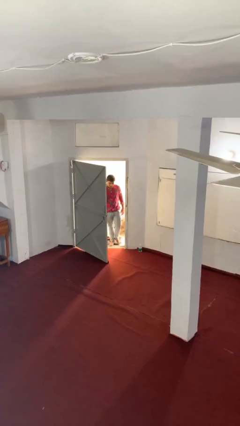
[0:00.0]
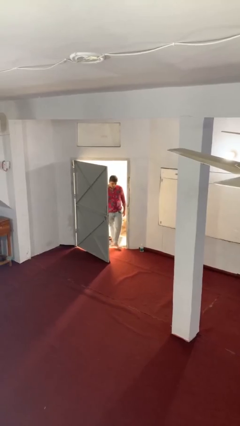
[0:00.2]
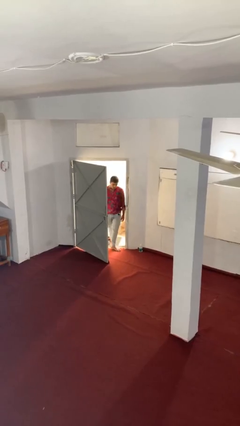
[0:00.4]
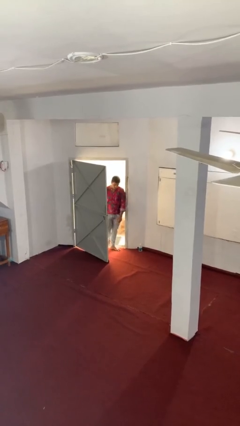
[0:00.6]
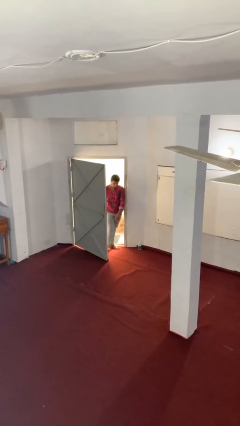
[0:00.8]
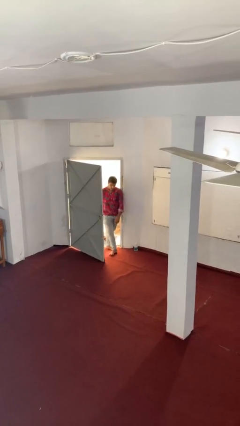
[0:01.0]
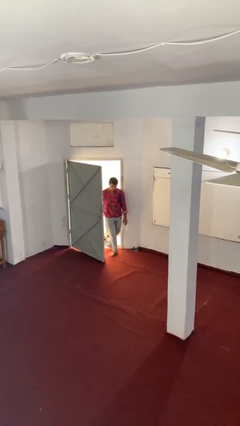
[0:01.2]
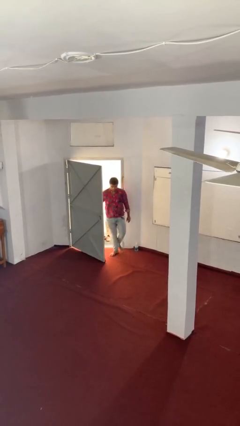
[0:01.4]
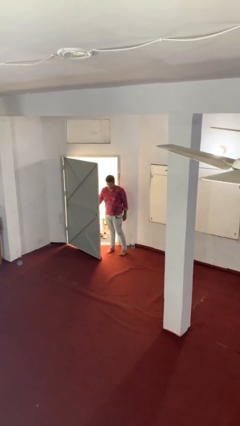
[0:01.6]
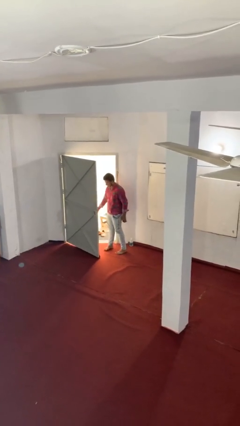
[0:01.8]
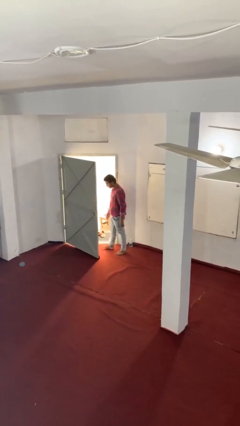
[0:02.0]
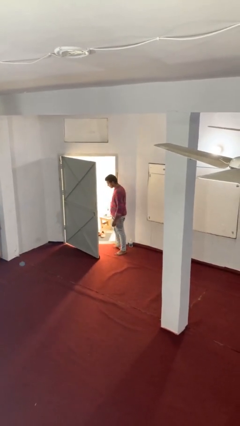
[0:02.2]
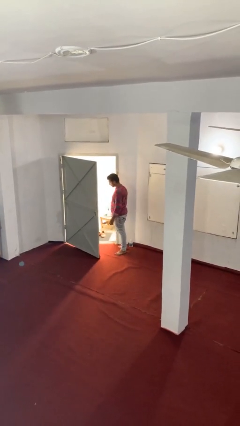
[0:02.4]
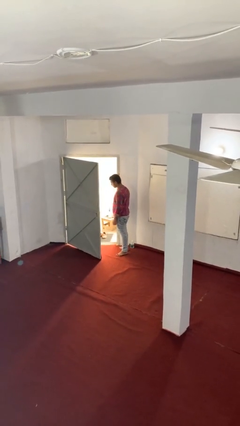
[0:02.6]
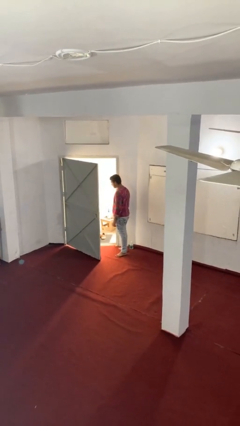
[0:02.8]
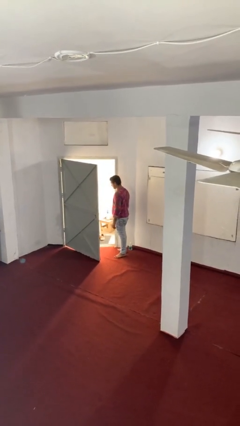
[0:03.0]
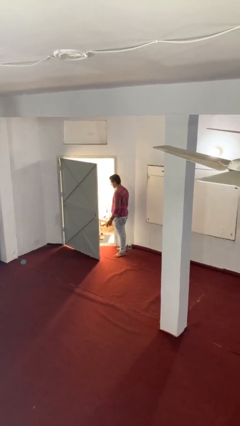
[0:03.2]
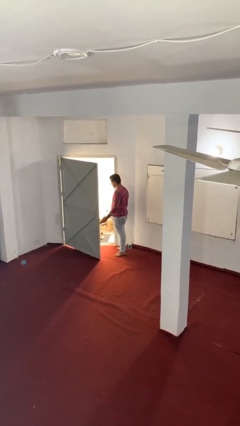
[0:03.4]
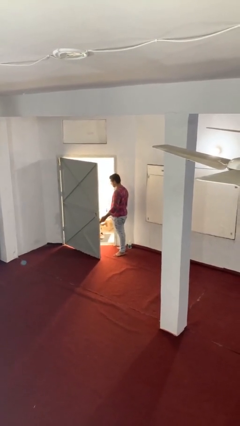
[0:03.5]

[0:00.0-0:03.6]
person enters scene through structure

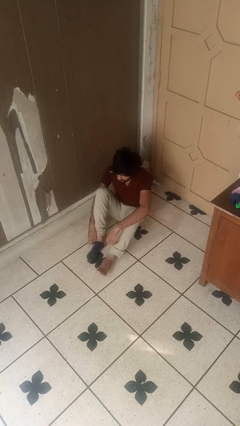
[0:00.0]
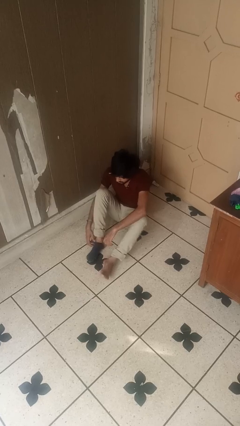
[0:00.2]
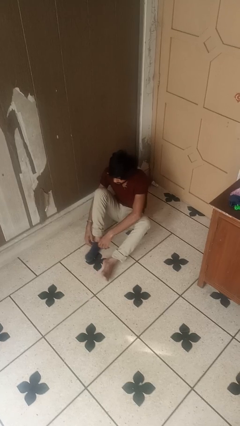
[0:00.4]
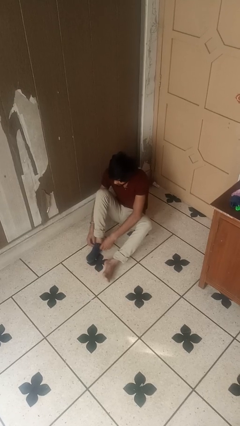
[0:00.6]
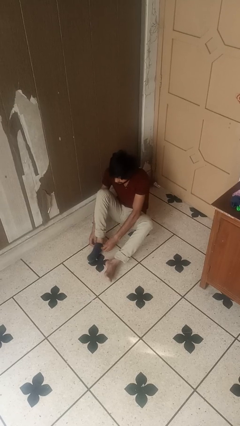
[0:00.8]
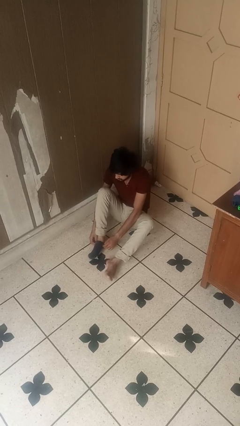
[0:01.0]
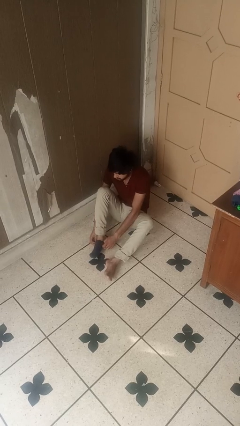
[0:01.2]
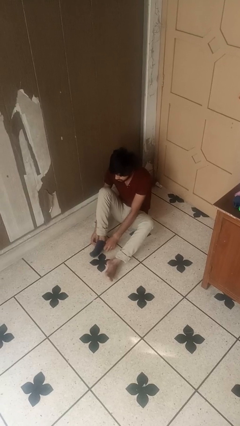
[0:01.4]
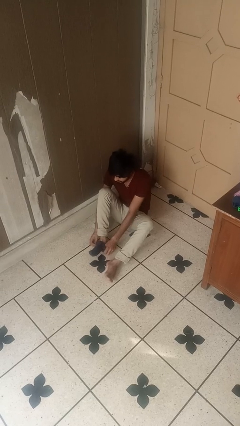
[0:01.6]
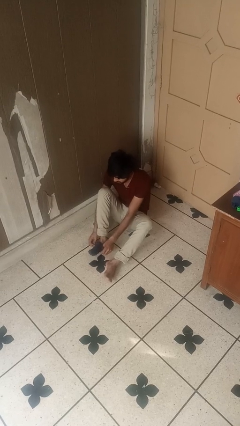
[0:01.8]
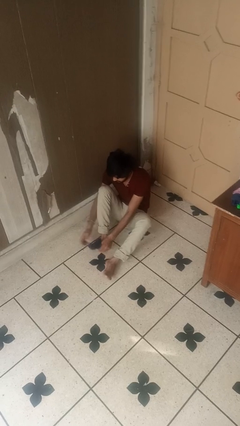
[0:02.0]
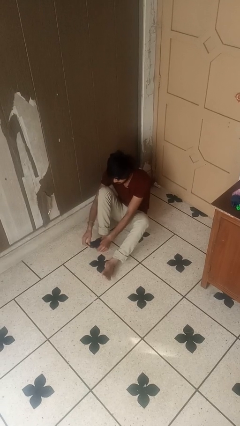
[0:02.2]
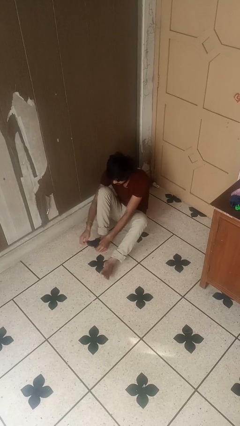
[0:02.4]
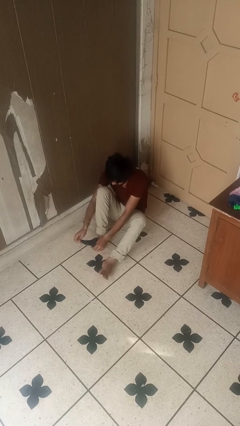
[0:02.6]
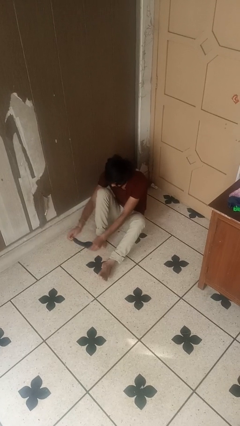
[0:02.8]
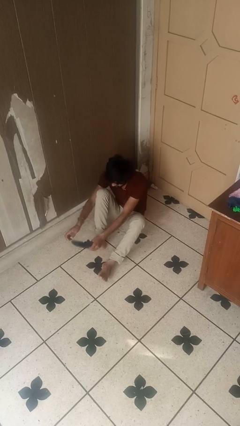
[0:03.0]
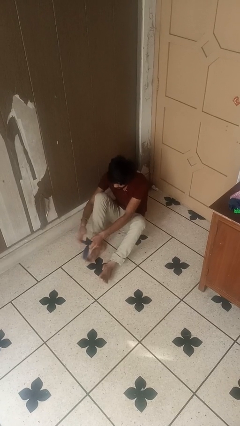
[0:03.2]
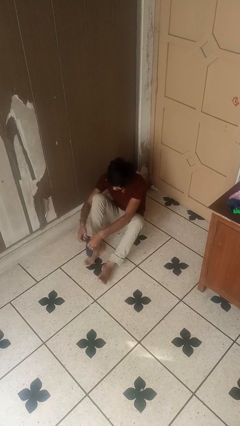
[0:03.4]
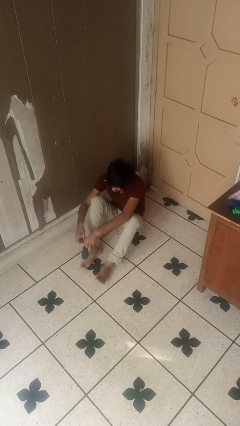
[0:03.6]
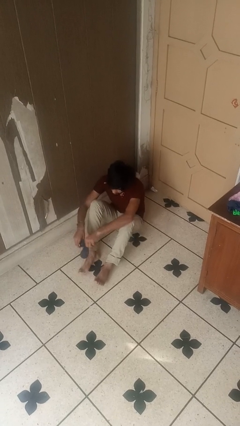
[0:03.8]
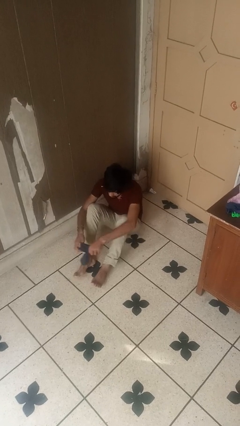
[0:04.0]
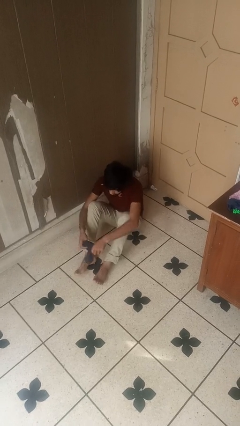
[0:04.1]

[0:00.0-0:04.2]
person takes off socks

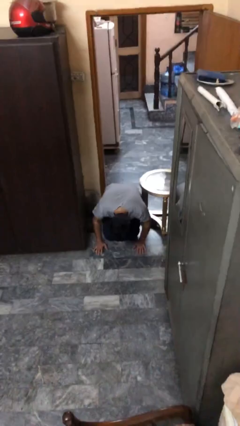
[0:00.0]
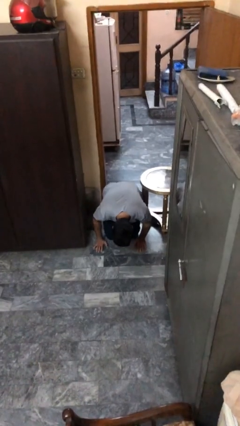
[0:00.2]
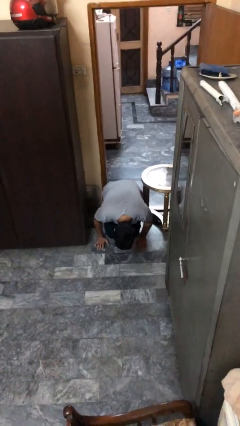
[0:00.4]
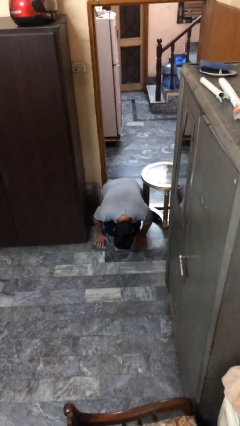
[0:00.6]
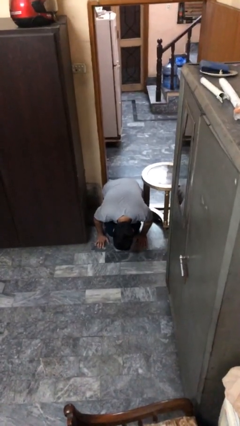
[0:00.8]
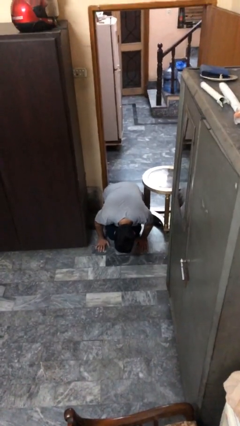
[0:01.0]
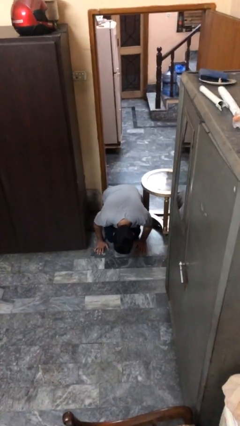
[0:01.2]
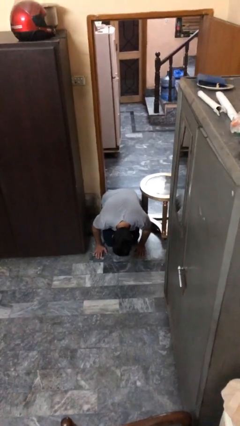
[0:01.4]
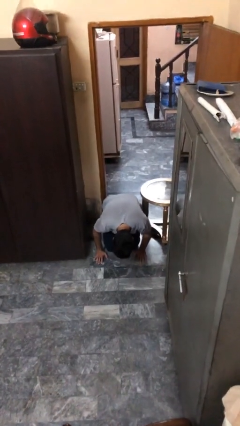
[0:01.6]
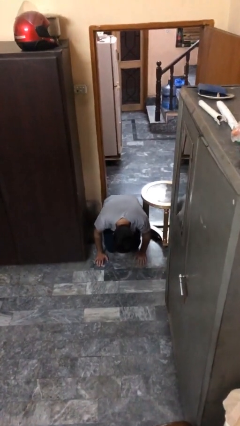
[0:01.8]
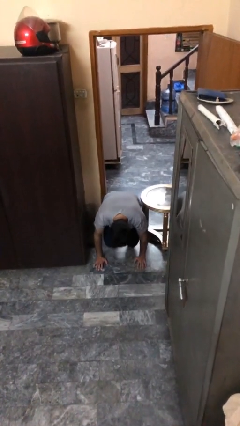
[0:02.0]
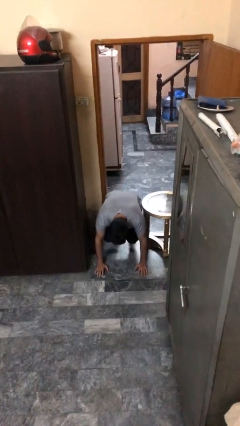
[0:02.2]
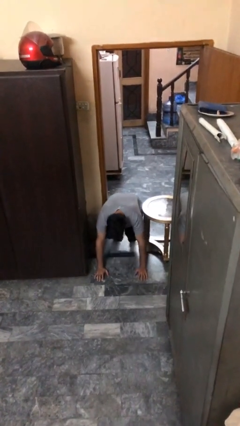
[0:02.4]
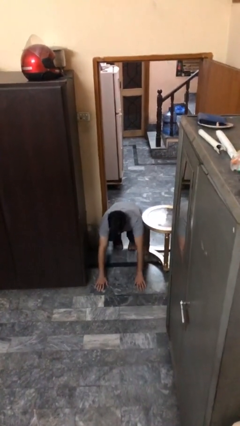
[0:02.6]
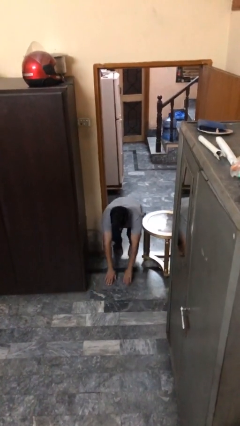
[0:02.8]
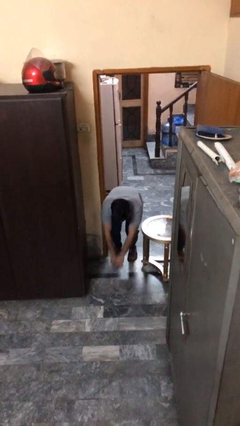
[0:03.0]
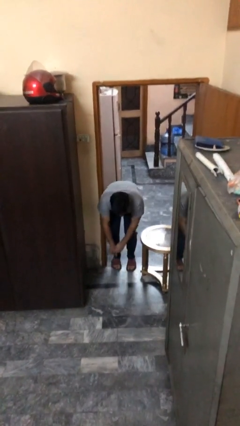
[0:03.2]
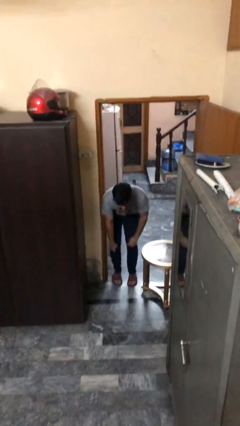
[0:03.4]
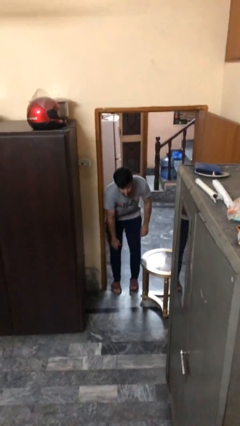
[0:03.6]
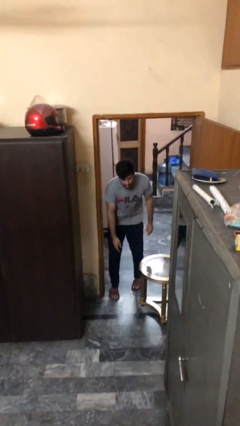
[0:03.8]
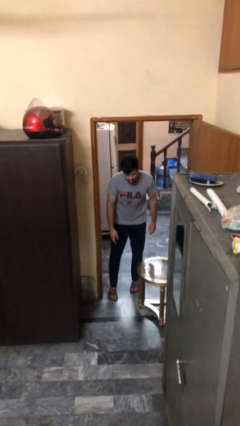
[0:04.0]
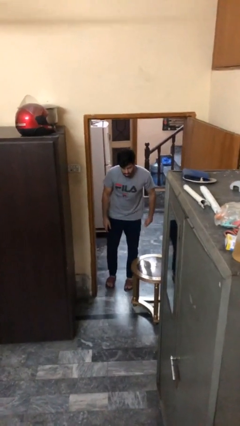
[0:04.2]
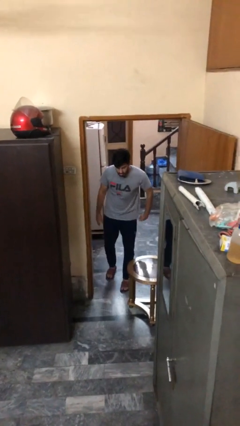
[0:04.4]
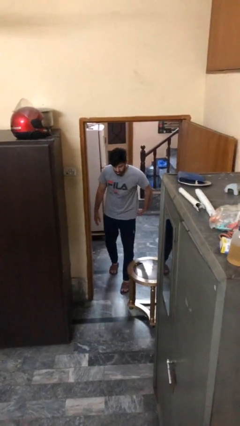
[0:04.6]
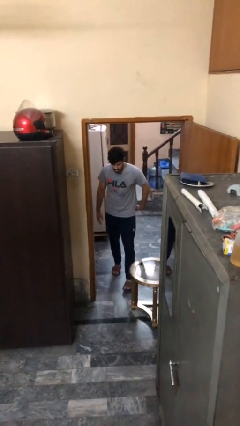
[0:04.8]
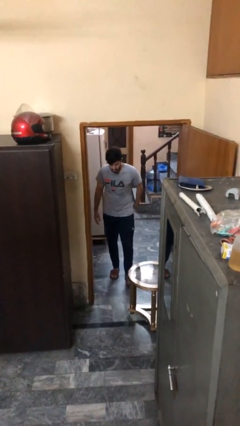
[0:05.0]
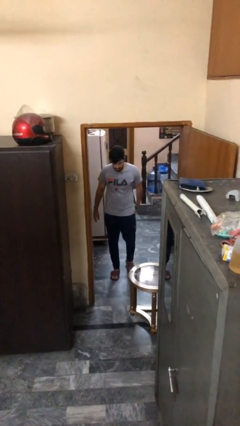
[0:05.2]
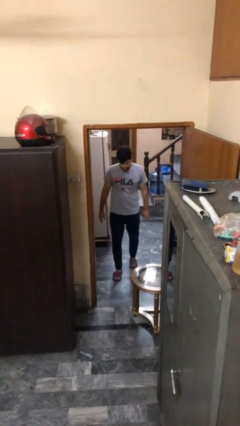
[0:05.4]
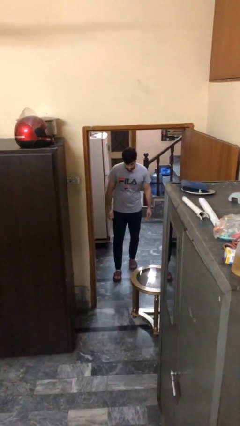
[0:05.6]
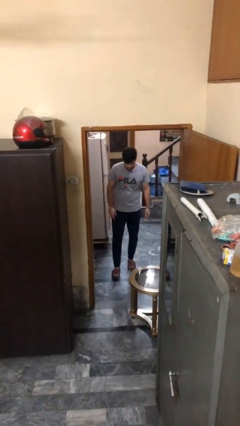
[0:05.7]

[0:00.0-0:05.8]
person stands up from floor

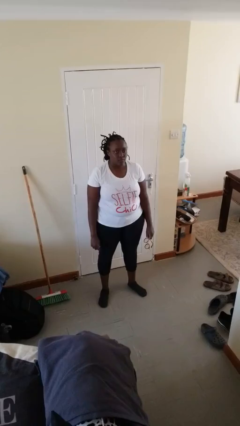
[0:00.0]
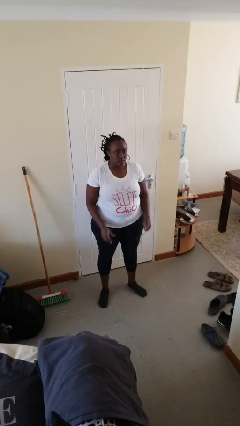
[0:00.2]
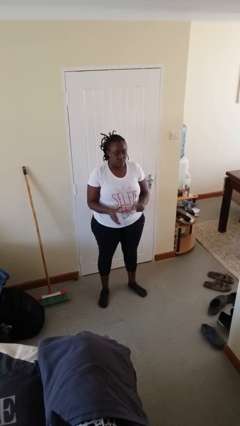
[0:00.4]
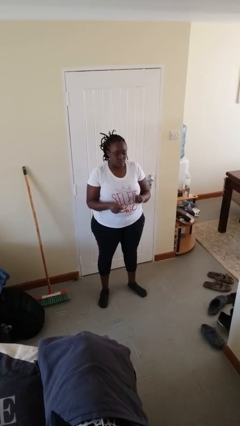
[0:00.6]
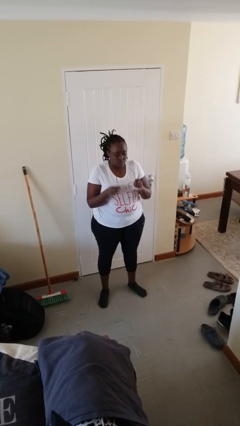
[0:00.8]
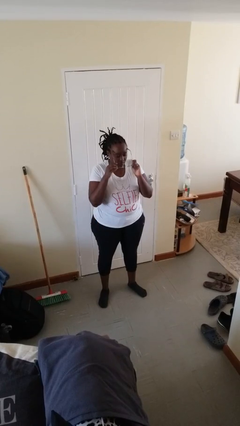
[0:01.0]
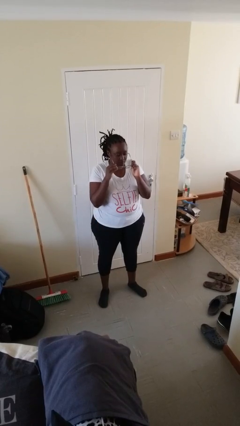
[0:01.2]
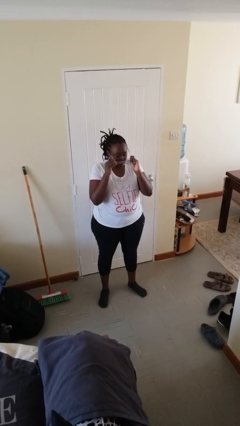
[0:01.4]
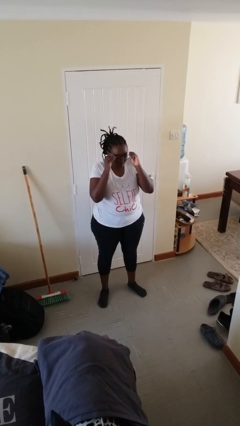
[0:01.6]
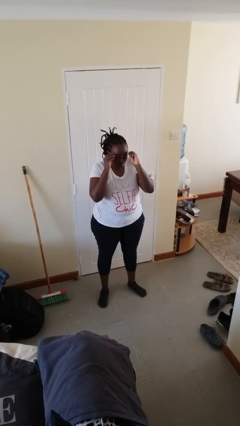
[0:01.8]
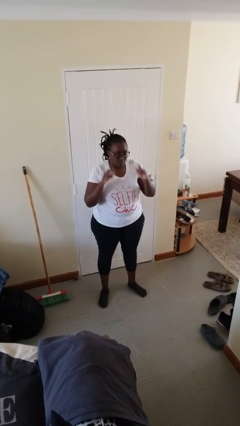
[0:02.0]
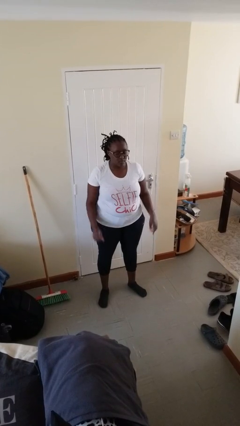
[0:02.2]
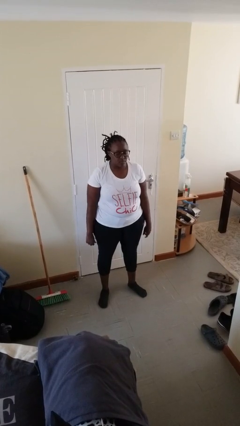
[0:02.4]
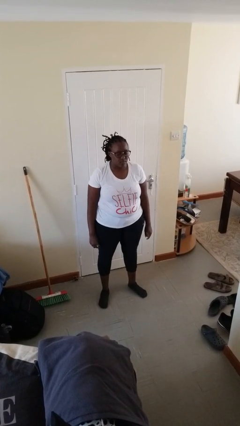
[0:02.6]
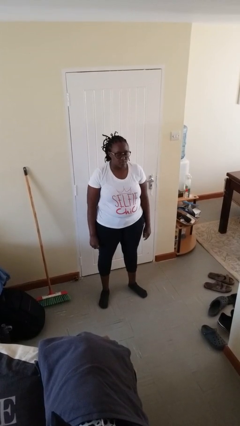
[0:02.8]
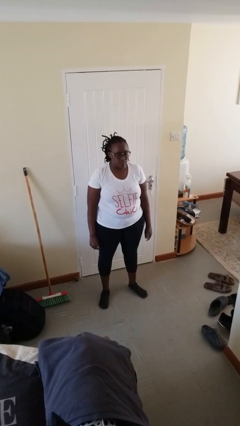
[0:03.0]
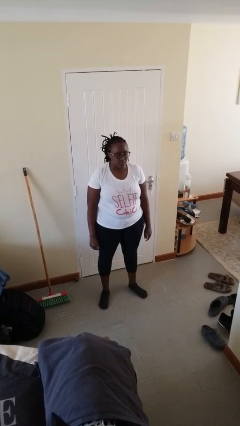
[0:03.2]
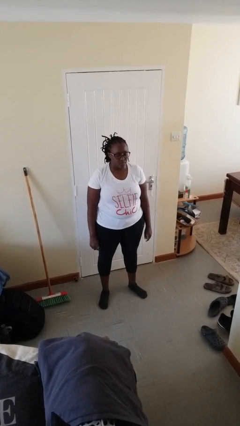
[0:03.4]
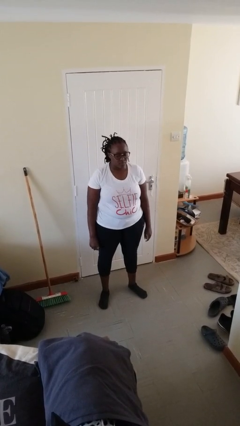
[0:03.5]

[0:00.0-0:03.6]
person puts on glasses

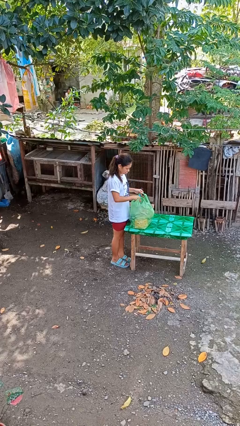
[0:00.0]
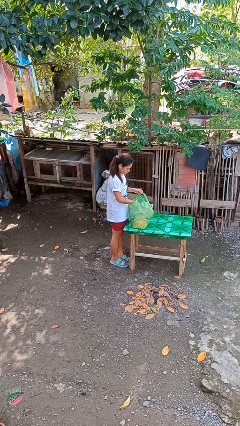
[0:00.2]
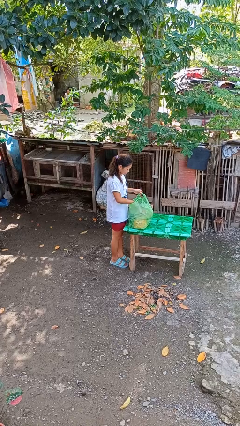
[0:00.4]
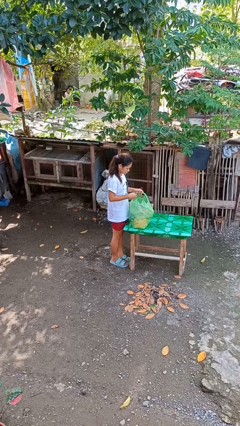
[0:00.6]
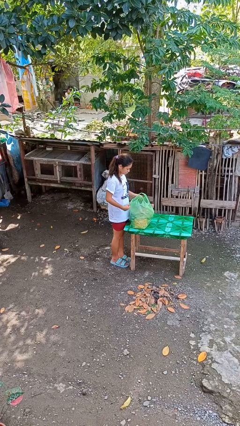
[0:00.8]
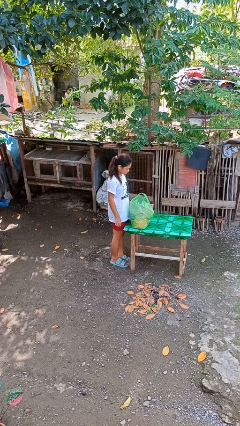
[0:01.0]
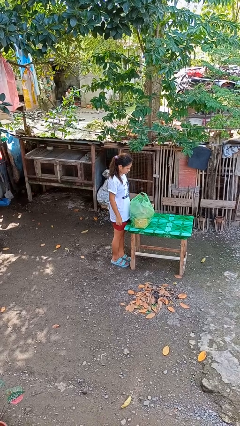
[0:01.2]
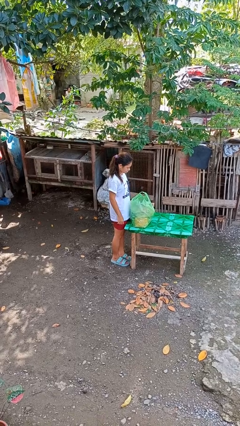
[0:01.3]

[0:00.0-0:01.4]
person puts object into bag
